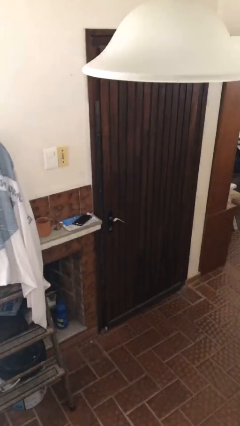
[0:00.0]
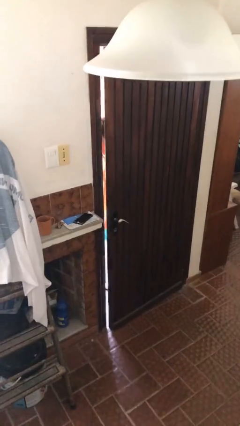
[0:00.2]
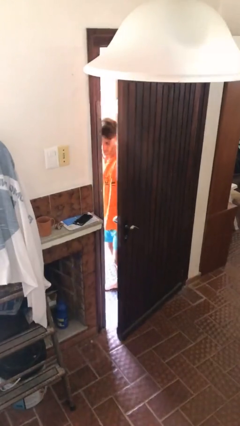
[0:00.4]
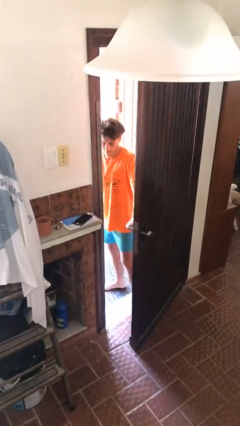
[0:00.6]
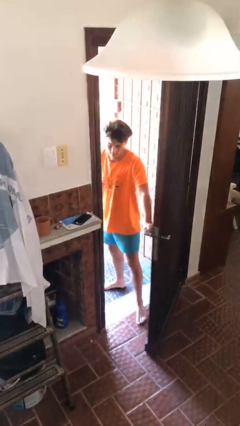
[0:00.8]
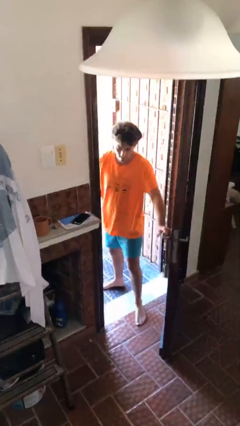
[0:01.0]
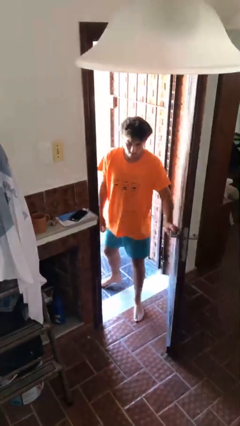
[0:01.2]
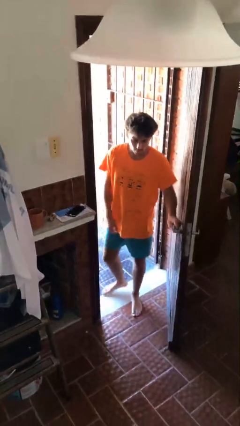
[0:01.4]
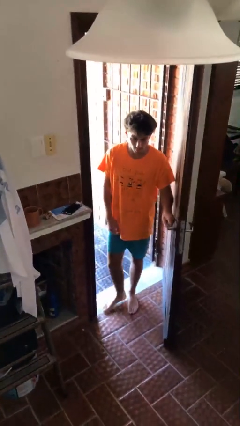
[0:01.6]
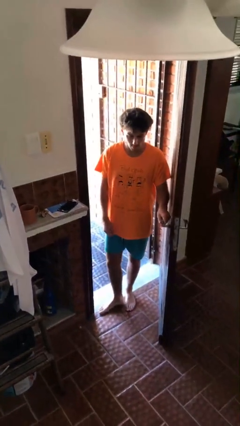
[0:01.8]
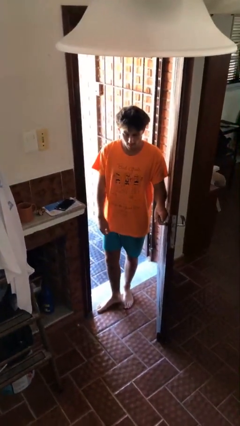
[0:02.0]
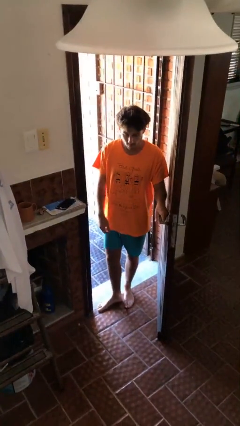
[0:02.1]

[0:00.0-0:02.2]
person opens facility door

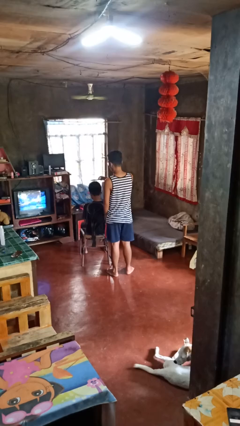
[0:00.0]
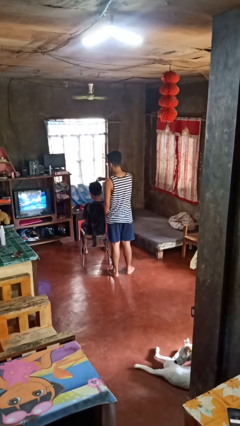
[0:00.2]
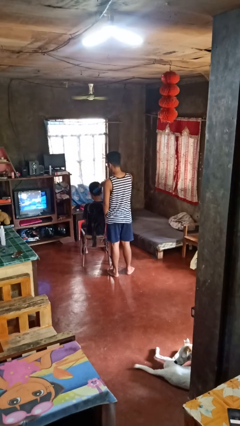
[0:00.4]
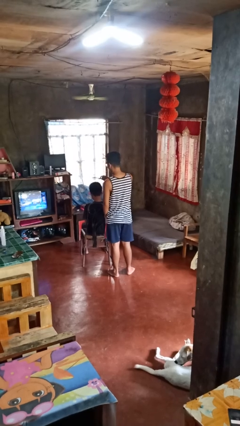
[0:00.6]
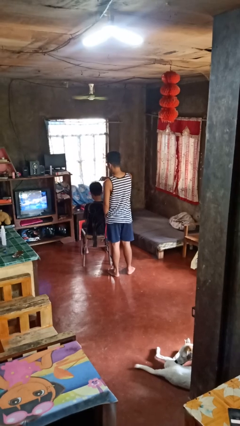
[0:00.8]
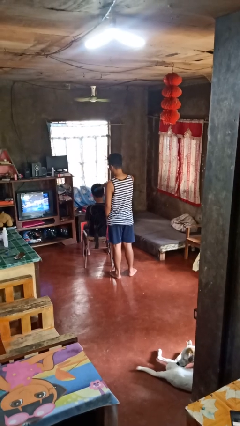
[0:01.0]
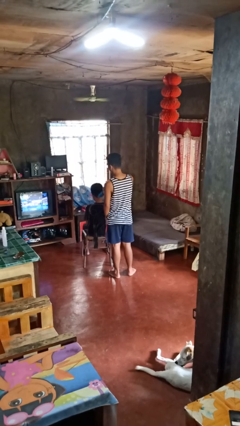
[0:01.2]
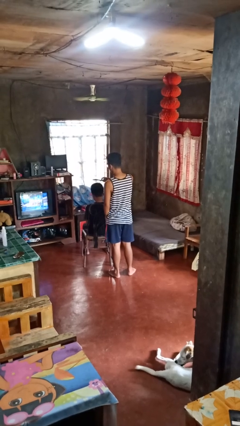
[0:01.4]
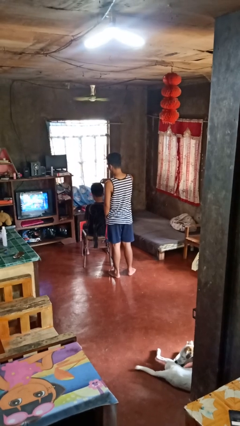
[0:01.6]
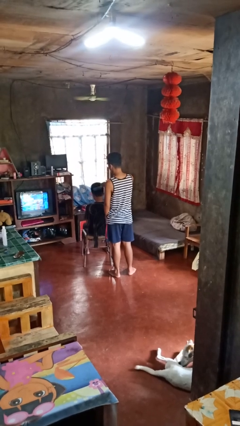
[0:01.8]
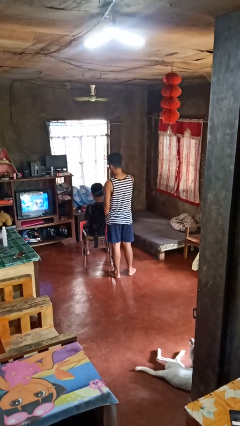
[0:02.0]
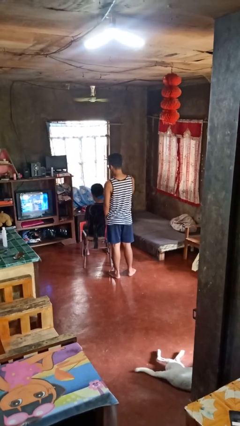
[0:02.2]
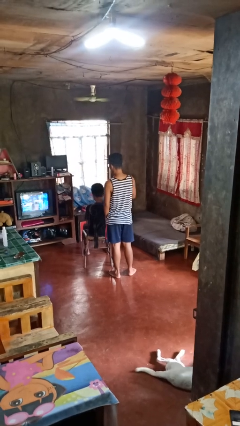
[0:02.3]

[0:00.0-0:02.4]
person brushes hair of person

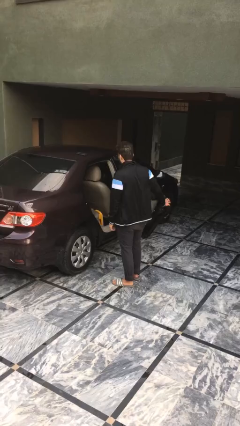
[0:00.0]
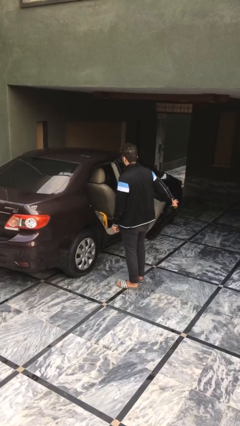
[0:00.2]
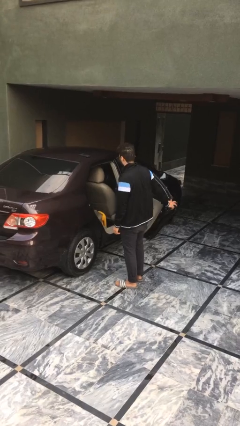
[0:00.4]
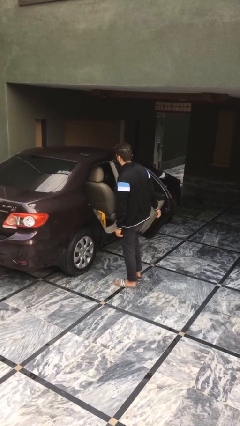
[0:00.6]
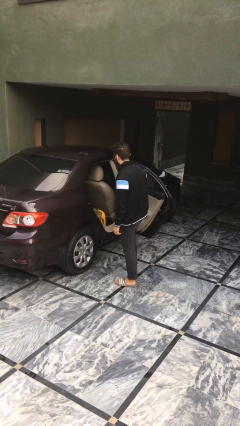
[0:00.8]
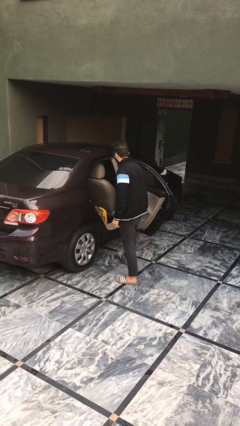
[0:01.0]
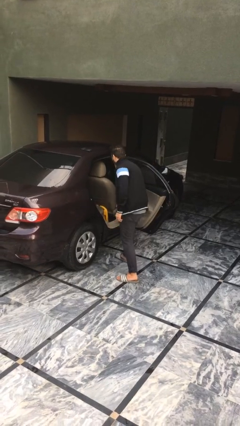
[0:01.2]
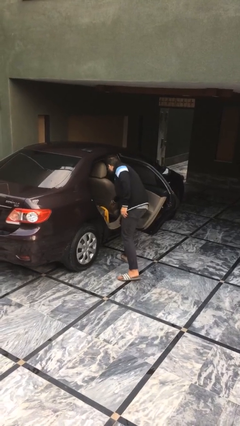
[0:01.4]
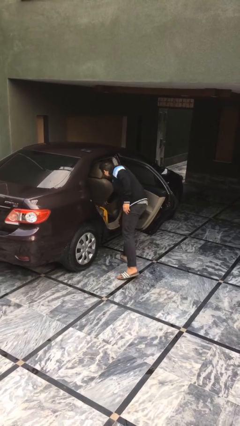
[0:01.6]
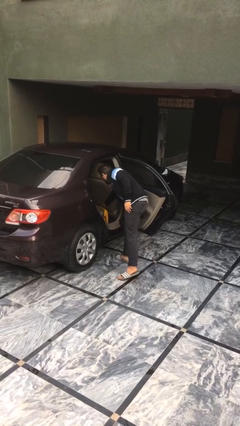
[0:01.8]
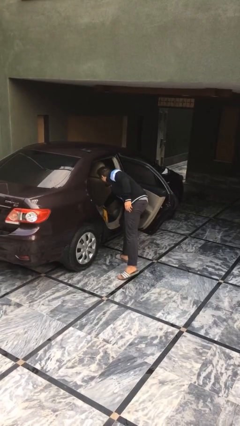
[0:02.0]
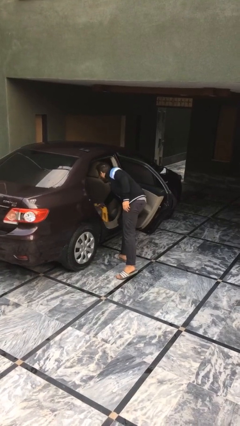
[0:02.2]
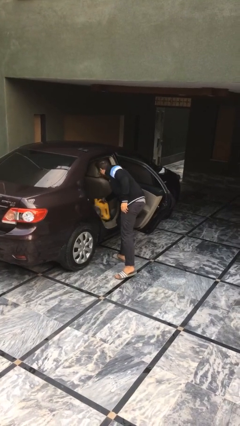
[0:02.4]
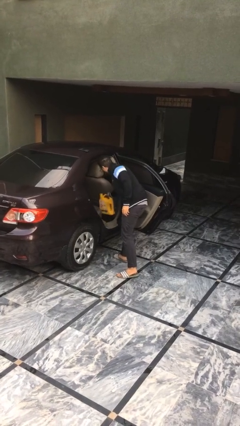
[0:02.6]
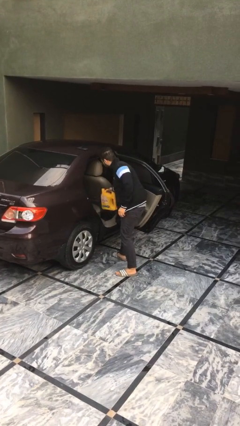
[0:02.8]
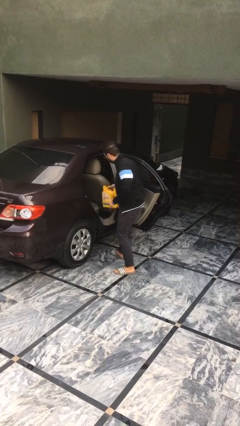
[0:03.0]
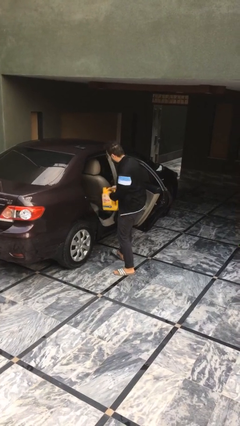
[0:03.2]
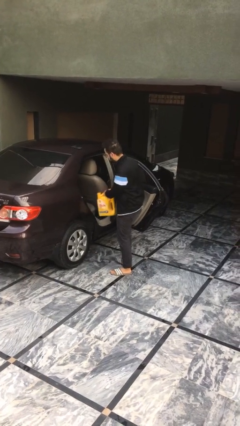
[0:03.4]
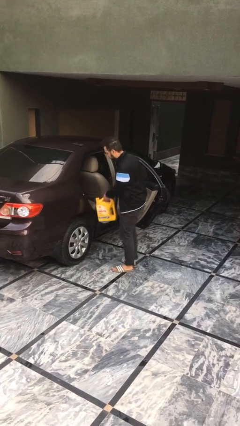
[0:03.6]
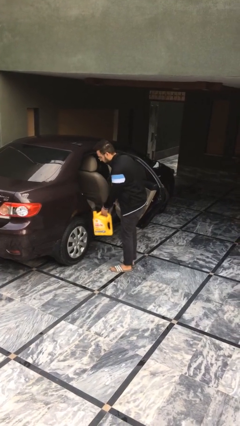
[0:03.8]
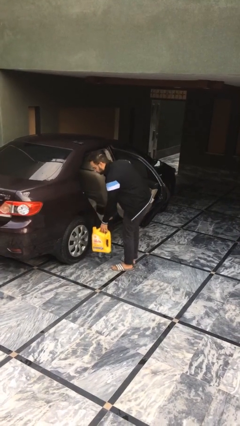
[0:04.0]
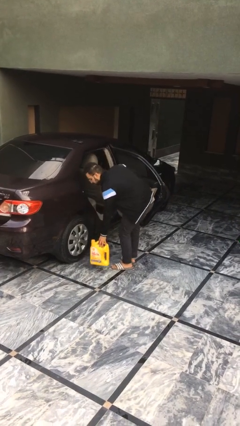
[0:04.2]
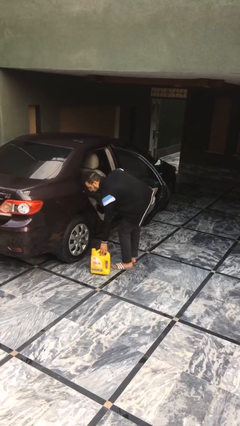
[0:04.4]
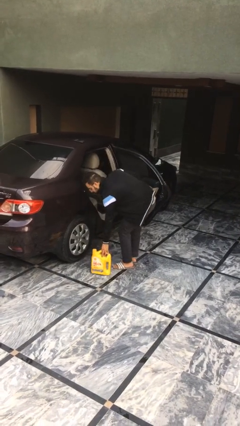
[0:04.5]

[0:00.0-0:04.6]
person unloads car

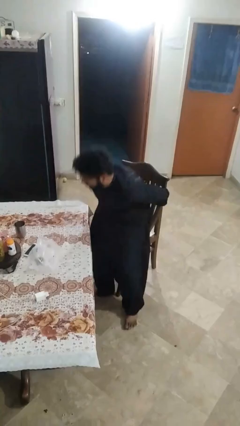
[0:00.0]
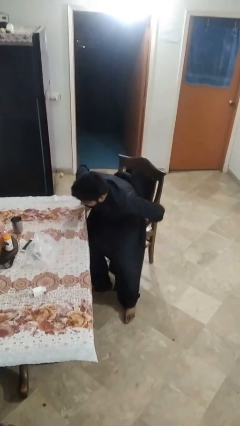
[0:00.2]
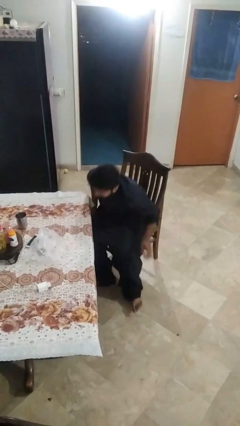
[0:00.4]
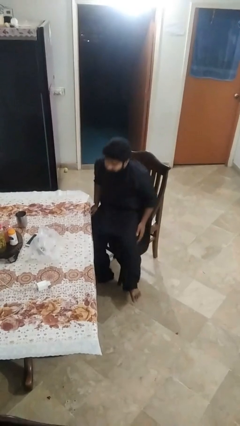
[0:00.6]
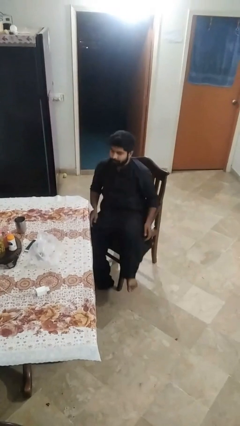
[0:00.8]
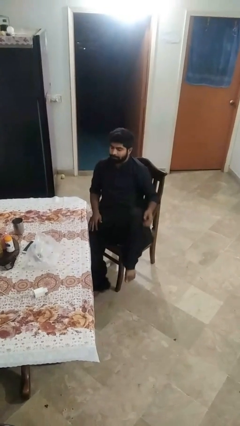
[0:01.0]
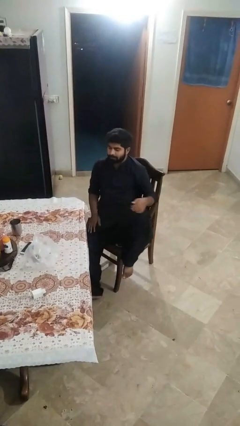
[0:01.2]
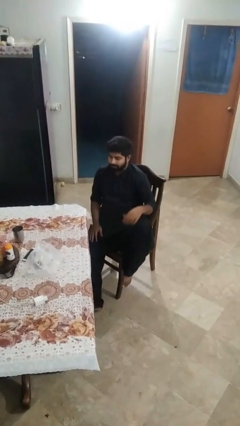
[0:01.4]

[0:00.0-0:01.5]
person sits down

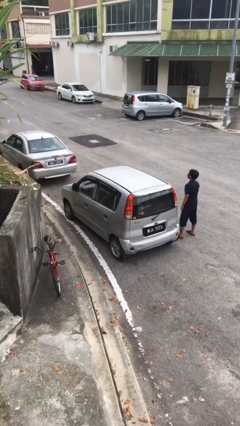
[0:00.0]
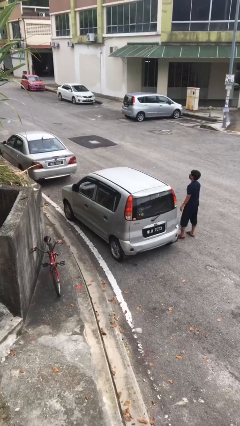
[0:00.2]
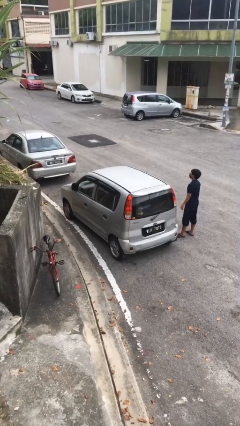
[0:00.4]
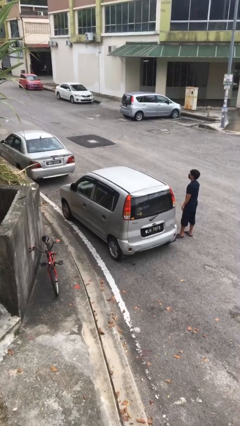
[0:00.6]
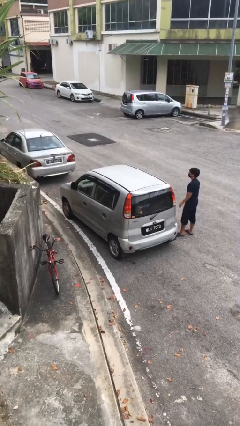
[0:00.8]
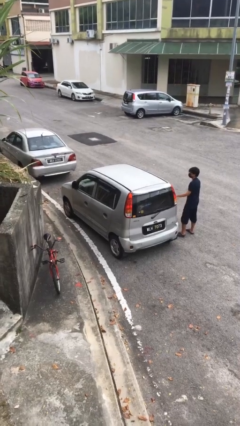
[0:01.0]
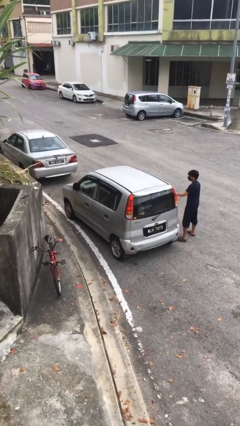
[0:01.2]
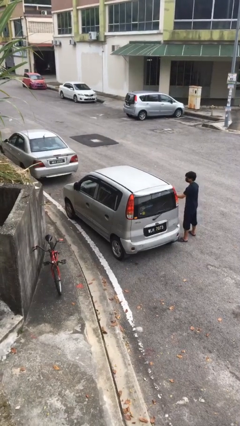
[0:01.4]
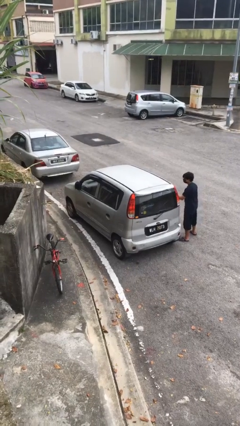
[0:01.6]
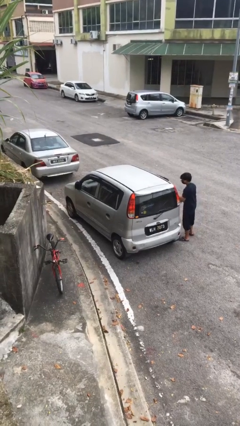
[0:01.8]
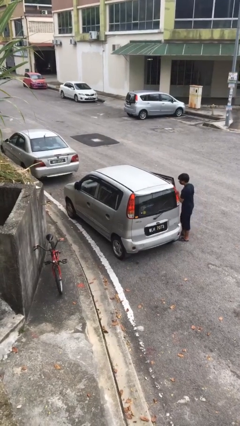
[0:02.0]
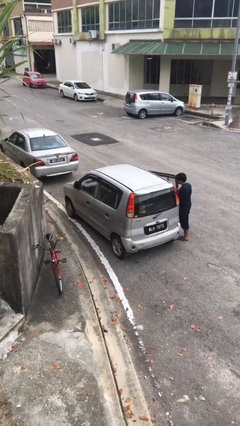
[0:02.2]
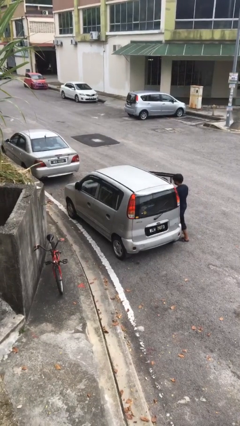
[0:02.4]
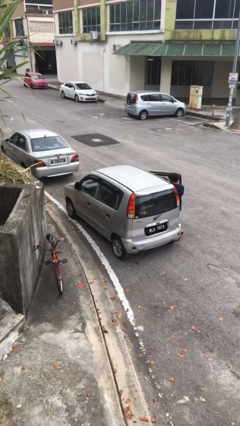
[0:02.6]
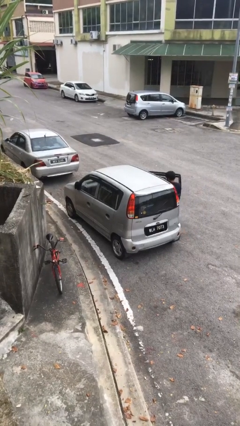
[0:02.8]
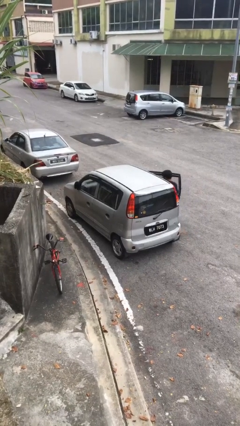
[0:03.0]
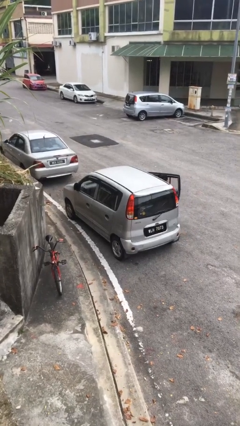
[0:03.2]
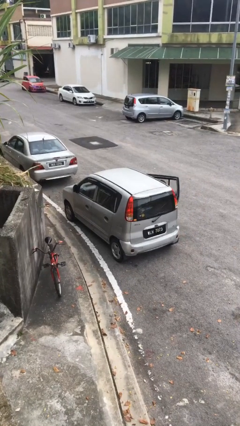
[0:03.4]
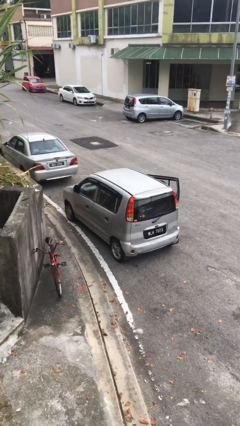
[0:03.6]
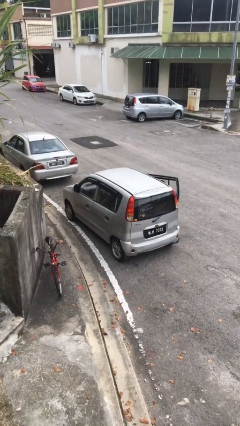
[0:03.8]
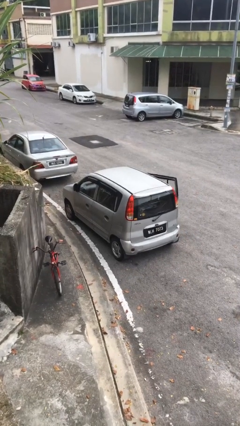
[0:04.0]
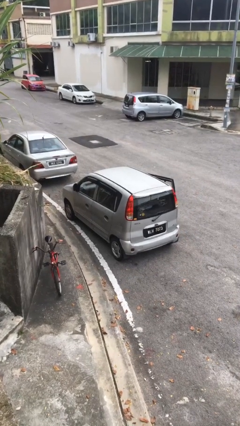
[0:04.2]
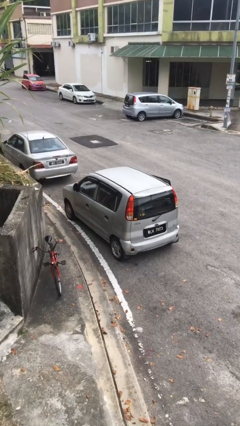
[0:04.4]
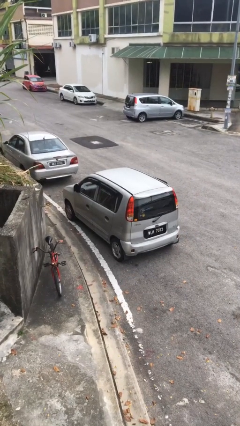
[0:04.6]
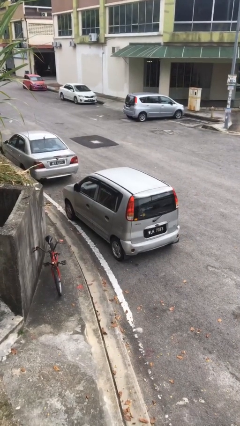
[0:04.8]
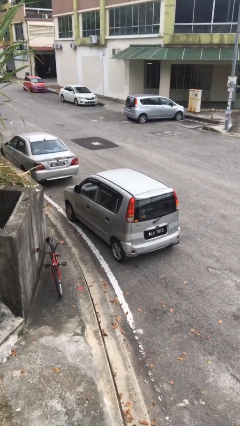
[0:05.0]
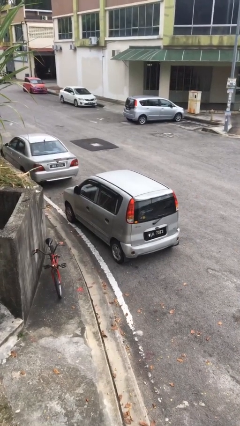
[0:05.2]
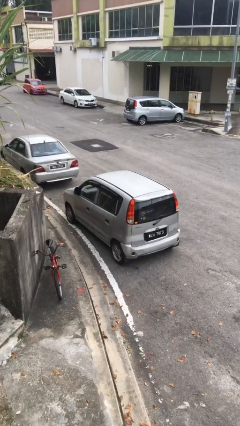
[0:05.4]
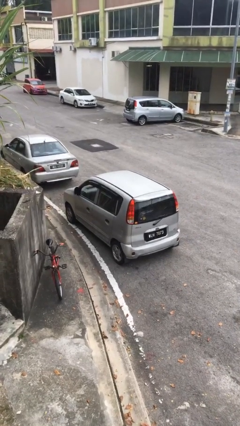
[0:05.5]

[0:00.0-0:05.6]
car picks up person

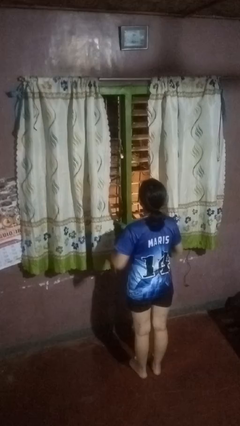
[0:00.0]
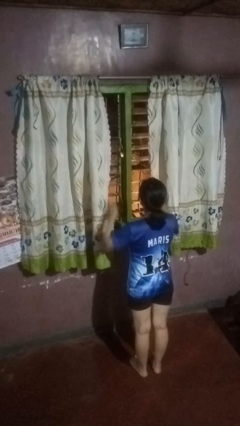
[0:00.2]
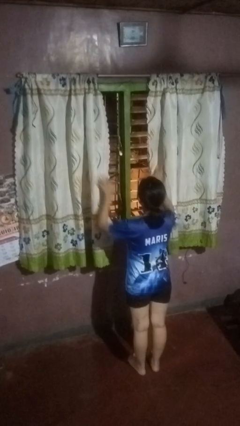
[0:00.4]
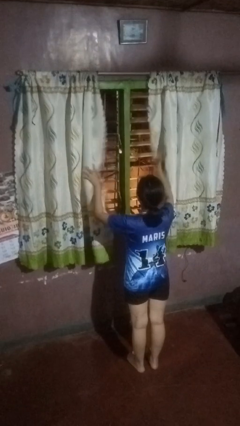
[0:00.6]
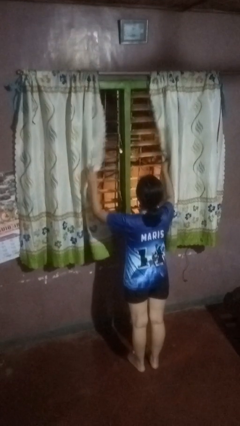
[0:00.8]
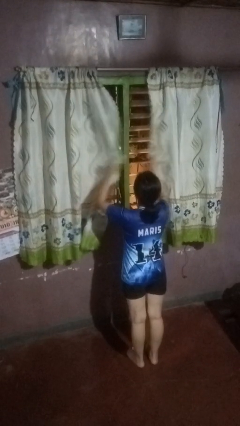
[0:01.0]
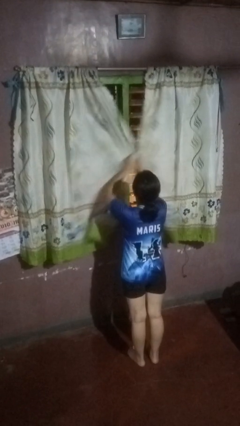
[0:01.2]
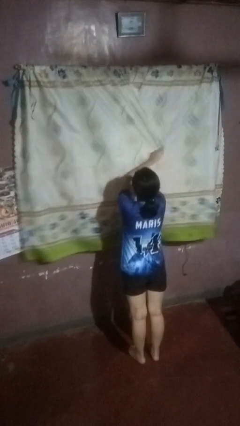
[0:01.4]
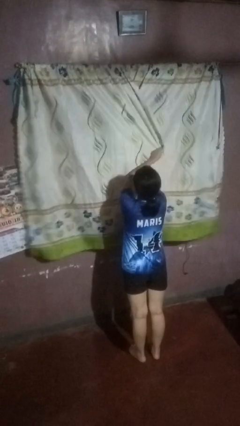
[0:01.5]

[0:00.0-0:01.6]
person closes curtains
